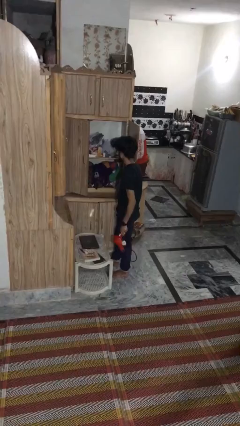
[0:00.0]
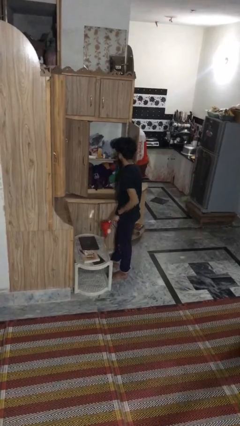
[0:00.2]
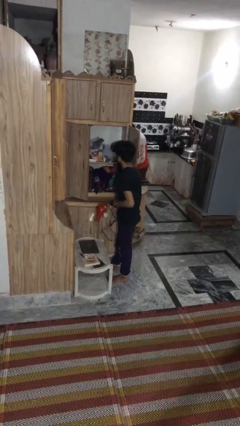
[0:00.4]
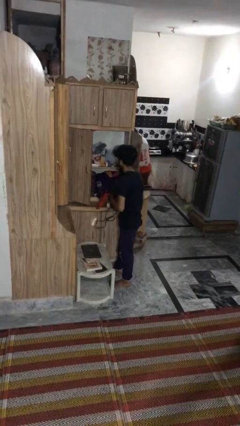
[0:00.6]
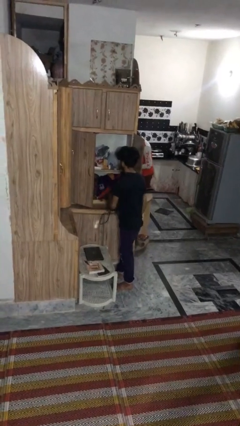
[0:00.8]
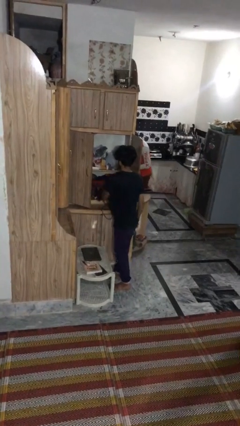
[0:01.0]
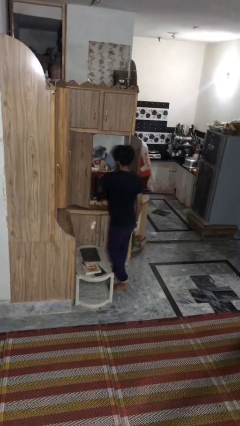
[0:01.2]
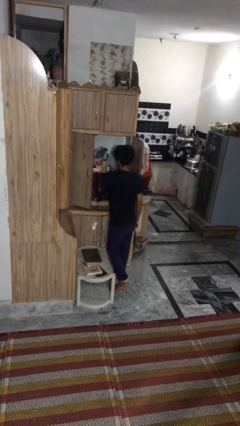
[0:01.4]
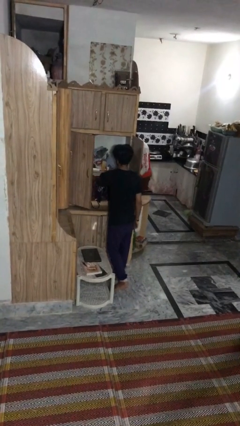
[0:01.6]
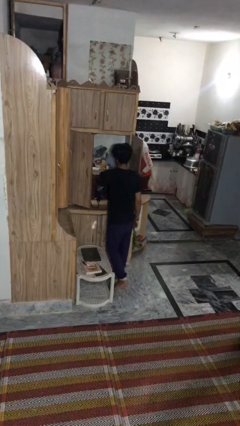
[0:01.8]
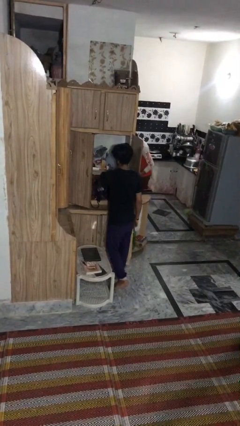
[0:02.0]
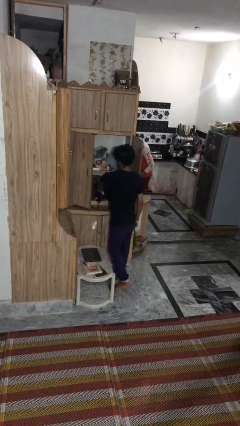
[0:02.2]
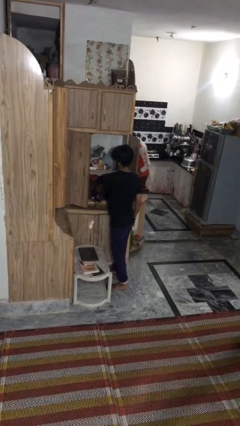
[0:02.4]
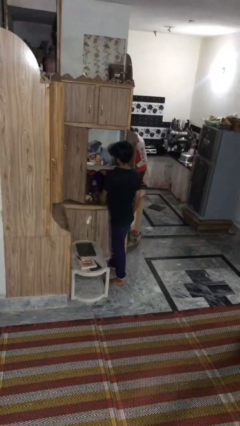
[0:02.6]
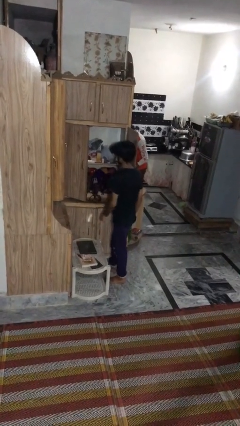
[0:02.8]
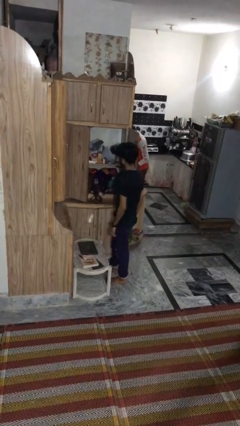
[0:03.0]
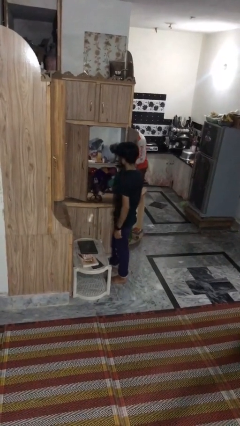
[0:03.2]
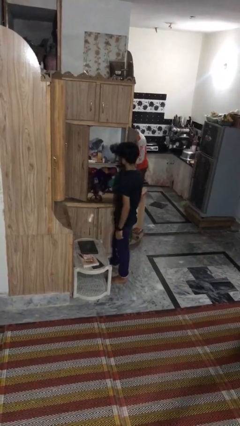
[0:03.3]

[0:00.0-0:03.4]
person puts down object into cabinet

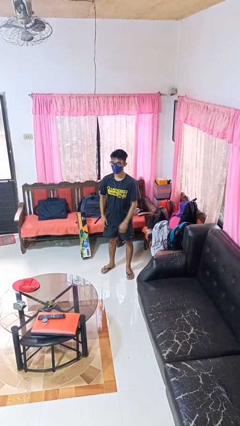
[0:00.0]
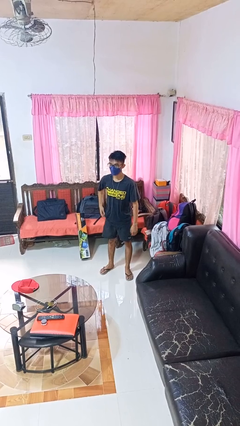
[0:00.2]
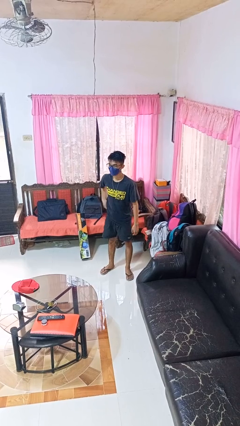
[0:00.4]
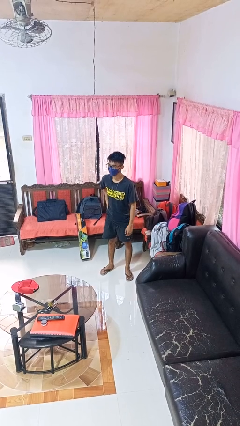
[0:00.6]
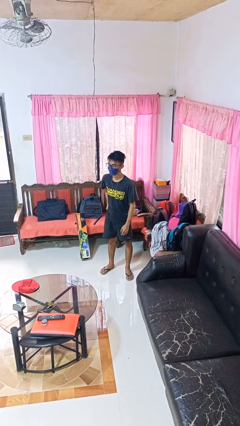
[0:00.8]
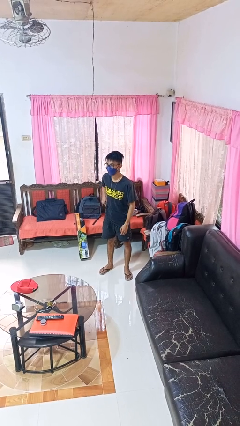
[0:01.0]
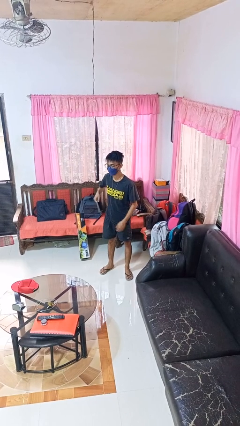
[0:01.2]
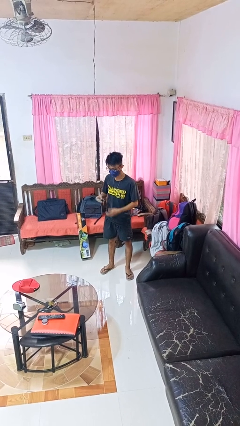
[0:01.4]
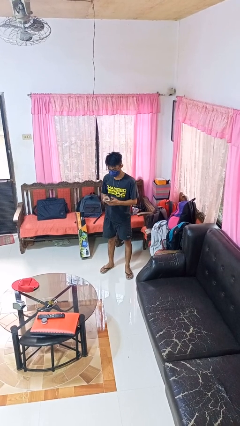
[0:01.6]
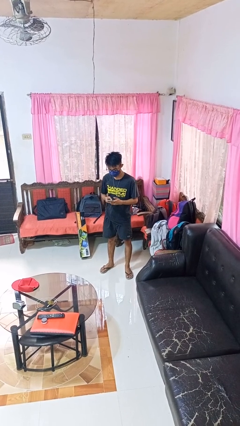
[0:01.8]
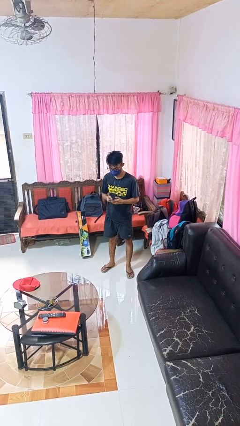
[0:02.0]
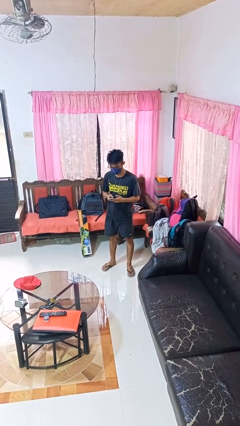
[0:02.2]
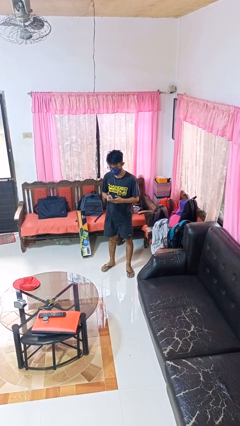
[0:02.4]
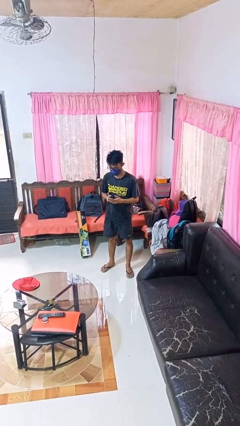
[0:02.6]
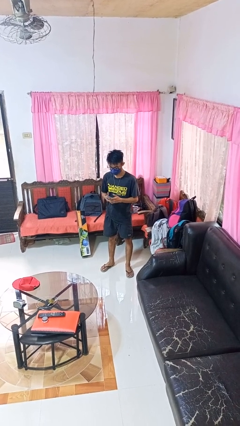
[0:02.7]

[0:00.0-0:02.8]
person takes phone from pocket

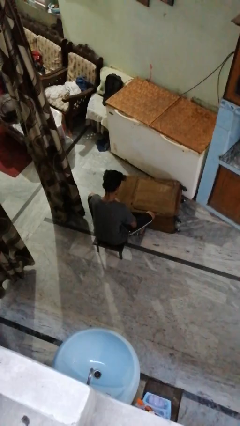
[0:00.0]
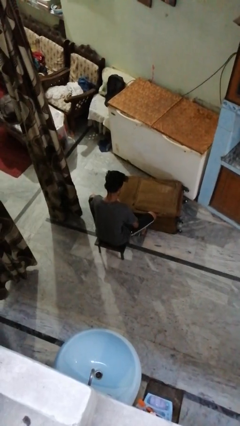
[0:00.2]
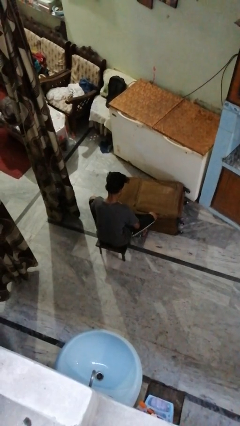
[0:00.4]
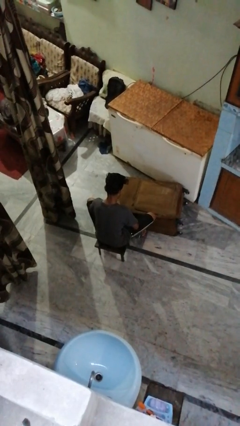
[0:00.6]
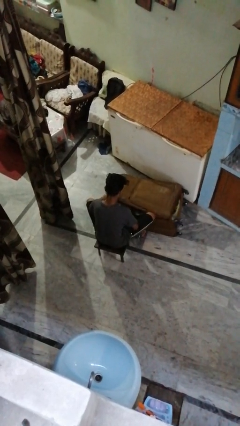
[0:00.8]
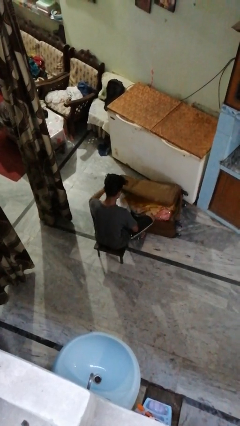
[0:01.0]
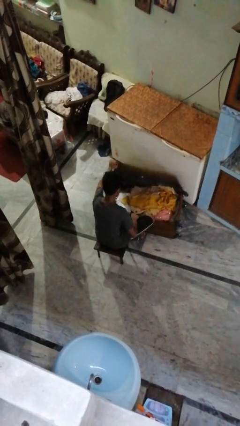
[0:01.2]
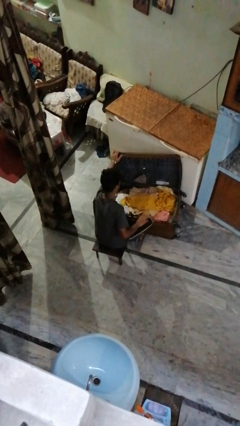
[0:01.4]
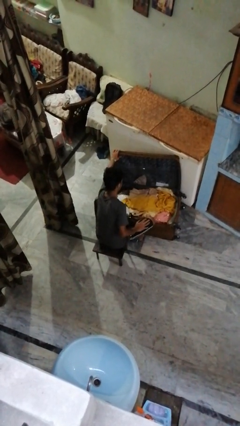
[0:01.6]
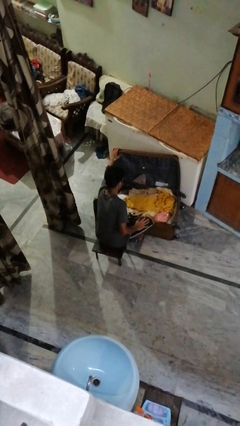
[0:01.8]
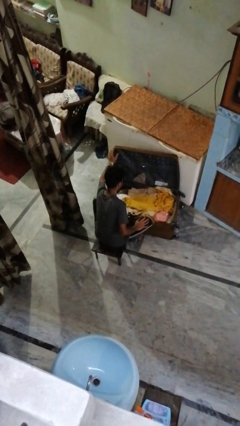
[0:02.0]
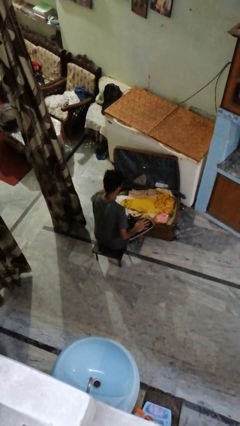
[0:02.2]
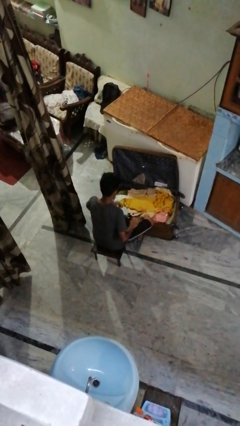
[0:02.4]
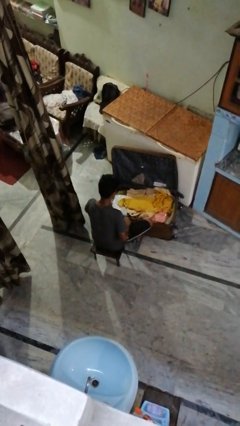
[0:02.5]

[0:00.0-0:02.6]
person opens suitcase

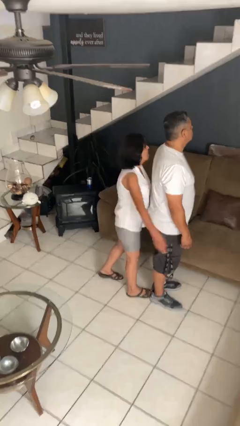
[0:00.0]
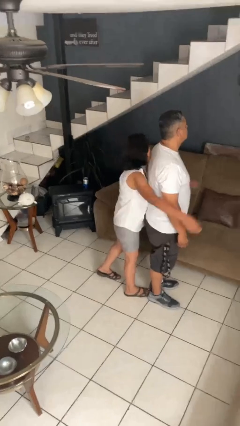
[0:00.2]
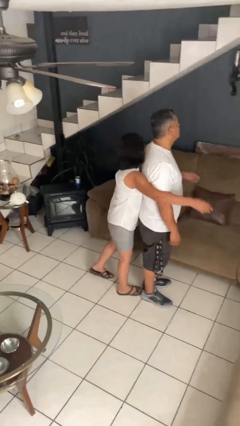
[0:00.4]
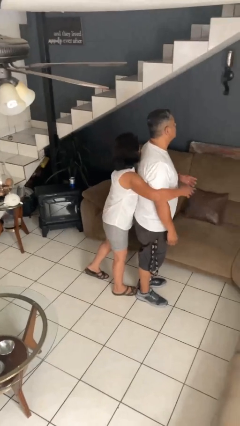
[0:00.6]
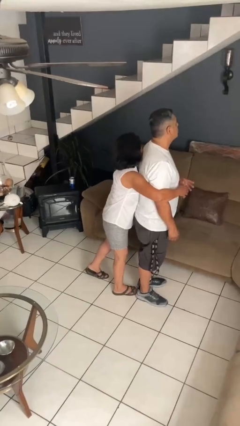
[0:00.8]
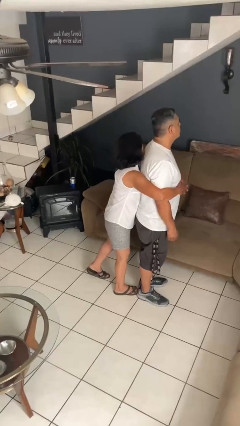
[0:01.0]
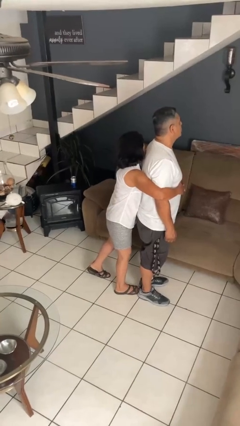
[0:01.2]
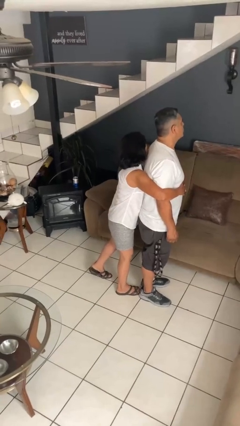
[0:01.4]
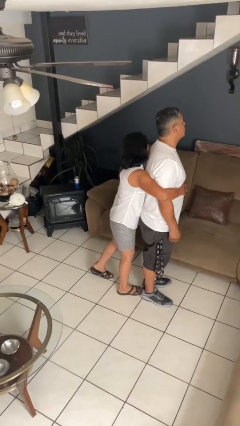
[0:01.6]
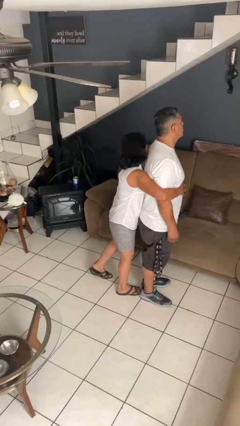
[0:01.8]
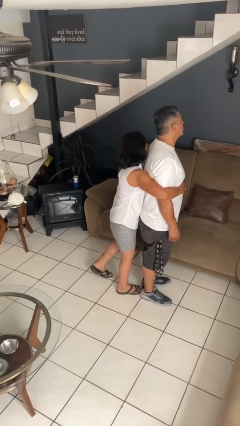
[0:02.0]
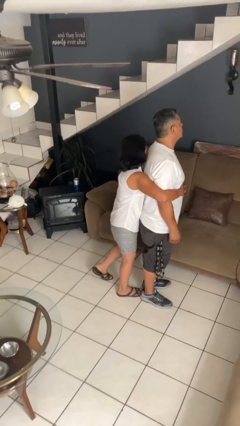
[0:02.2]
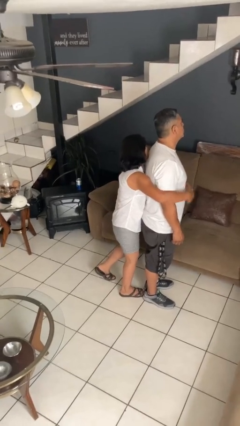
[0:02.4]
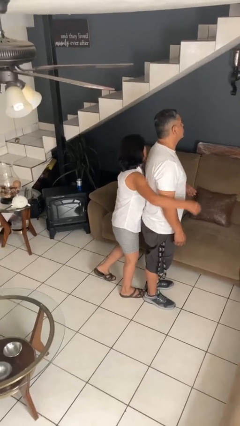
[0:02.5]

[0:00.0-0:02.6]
person hugs person from behind

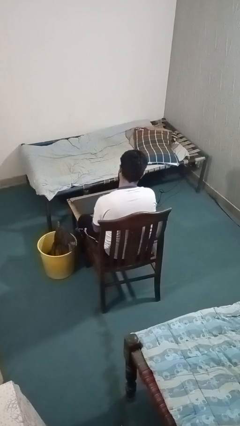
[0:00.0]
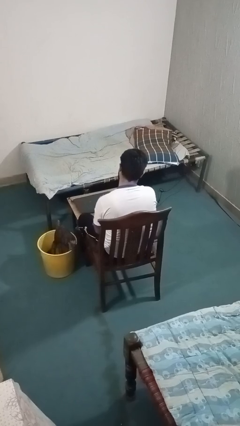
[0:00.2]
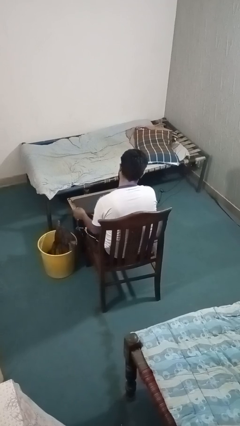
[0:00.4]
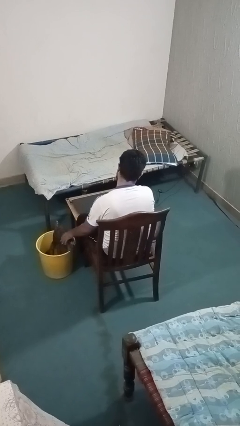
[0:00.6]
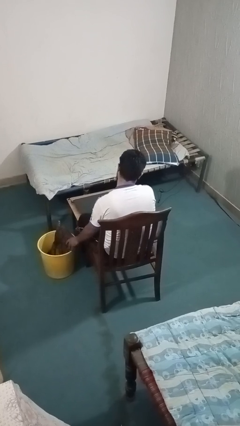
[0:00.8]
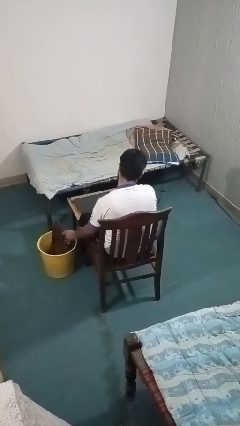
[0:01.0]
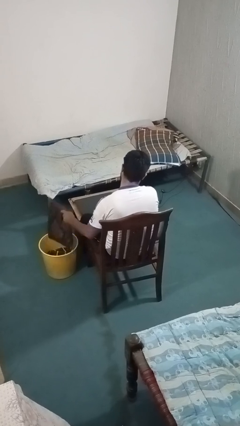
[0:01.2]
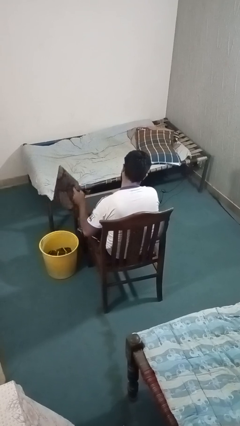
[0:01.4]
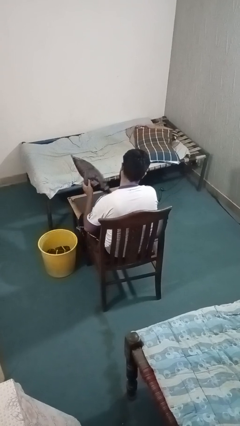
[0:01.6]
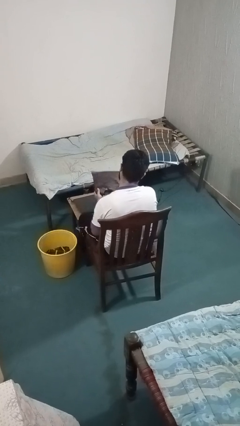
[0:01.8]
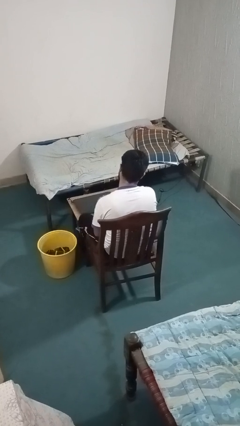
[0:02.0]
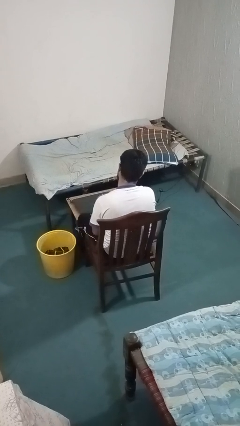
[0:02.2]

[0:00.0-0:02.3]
person takes object from basket

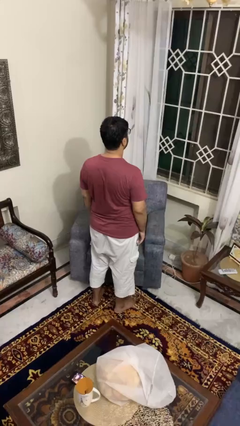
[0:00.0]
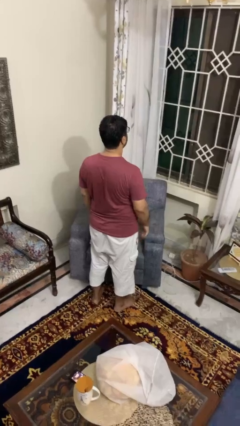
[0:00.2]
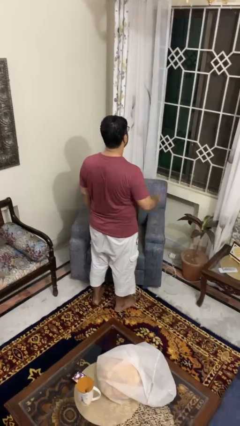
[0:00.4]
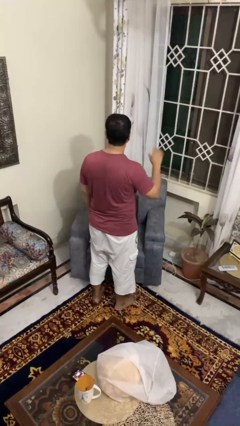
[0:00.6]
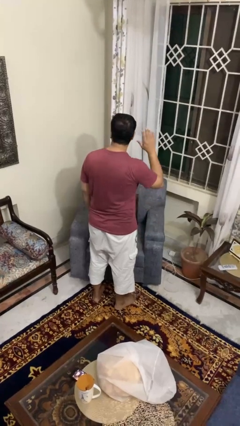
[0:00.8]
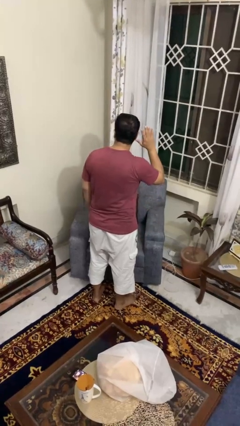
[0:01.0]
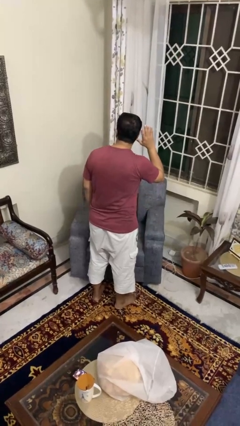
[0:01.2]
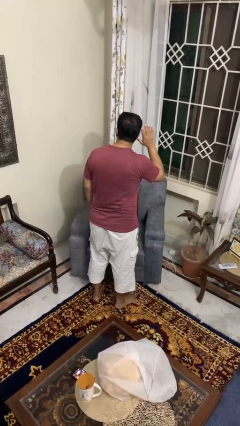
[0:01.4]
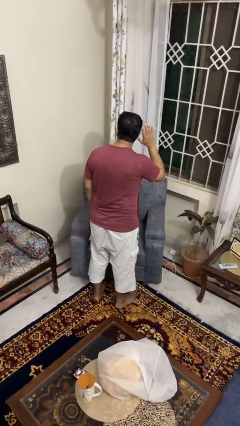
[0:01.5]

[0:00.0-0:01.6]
person gestures listen closely

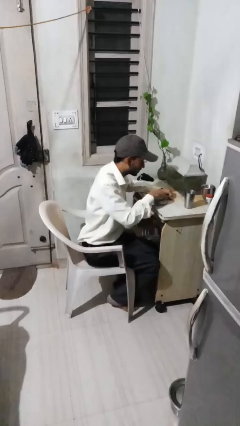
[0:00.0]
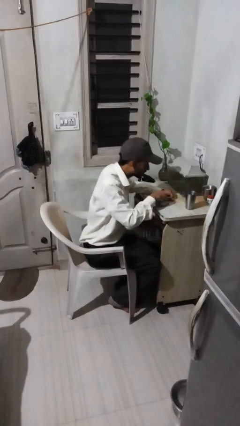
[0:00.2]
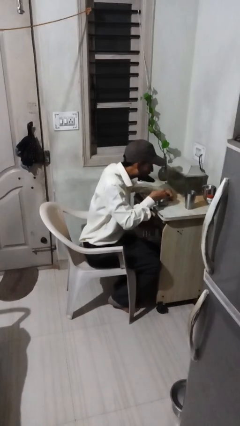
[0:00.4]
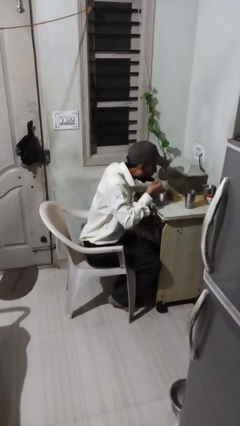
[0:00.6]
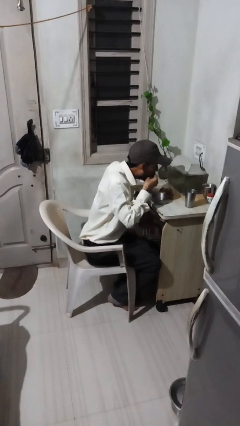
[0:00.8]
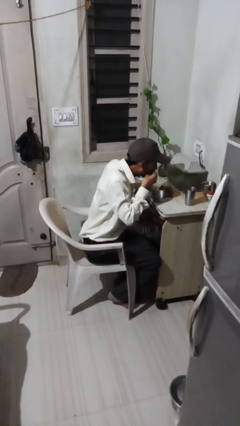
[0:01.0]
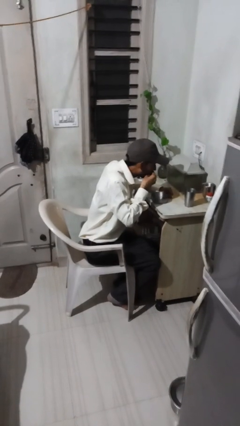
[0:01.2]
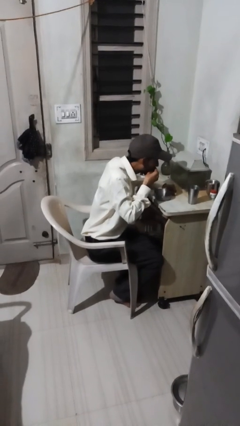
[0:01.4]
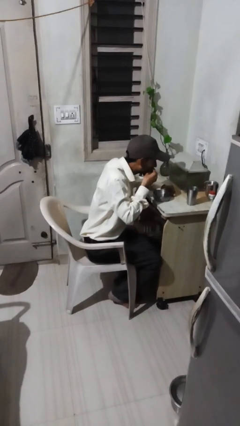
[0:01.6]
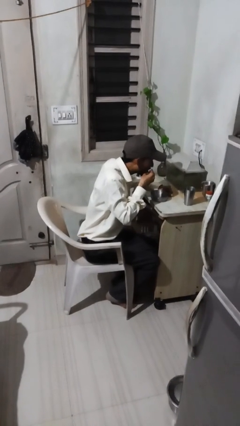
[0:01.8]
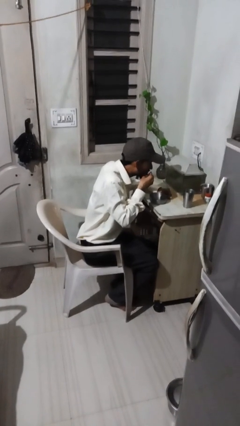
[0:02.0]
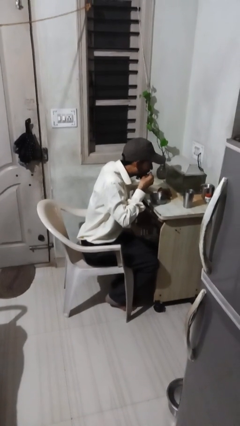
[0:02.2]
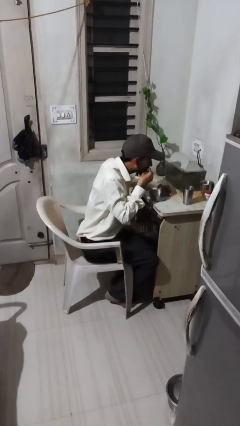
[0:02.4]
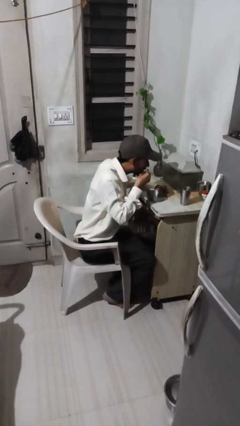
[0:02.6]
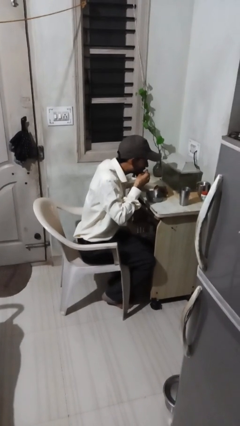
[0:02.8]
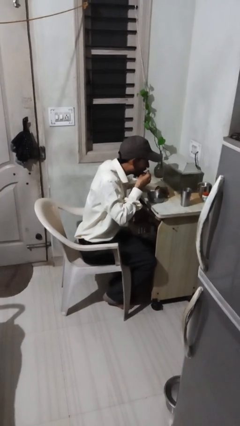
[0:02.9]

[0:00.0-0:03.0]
person eats with hands
